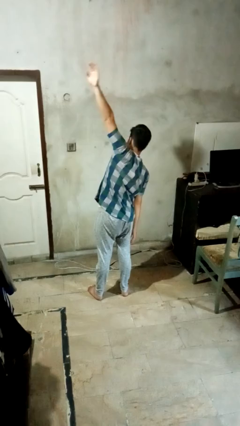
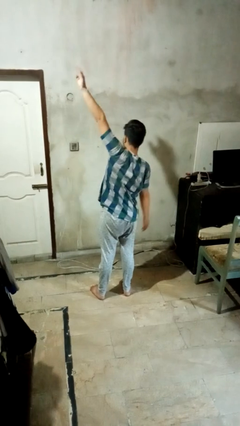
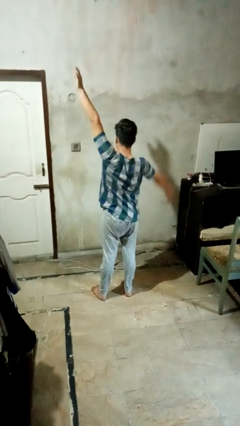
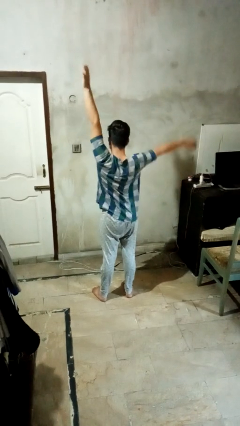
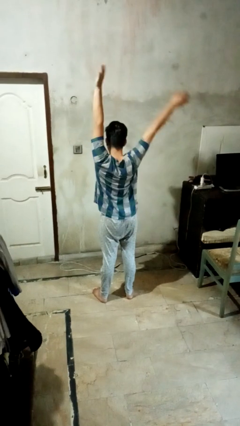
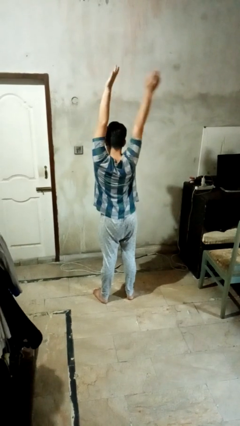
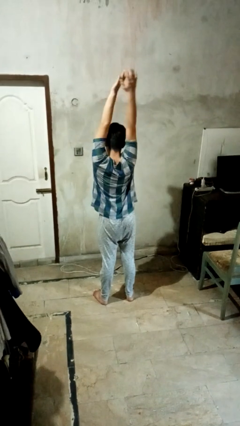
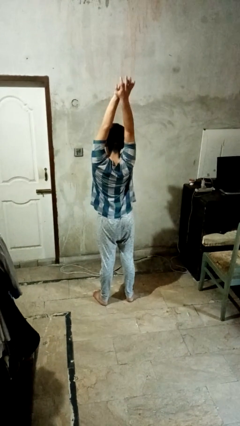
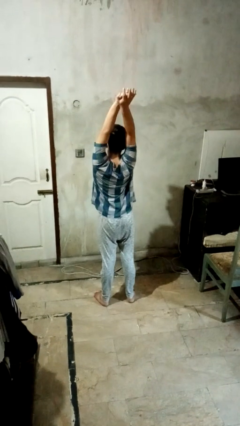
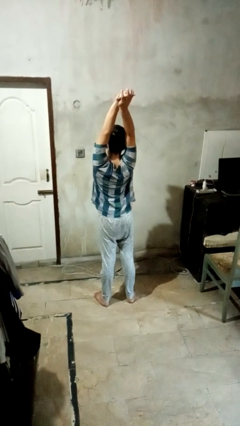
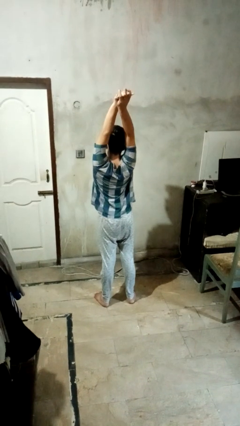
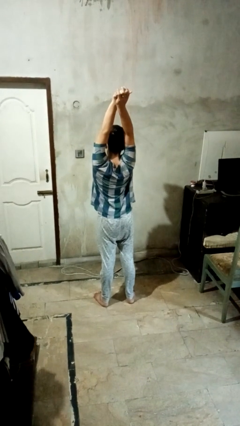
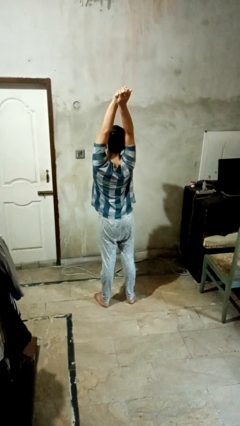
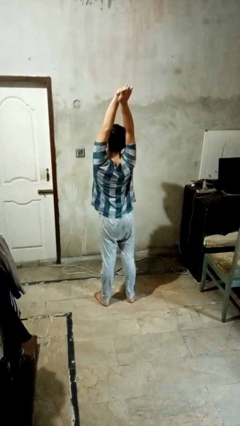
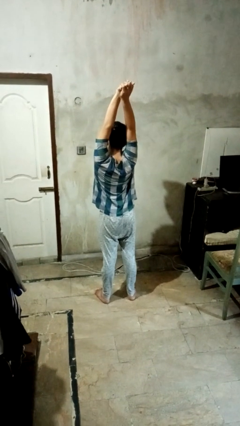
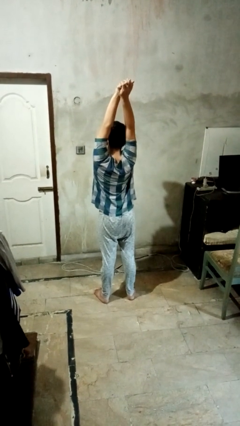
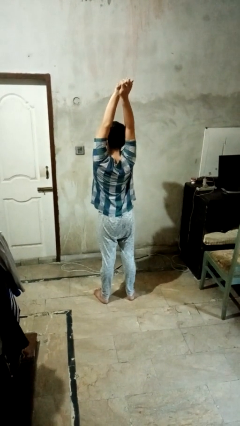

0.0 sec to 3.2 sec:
person stretches arms over head

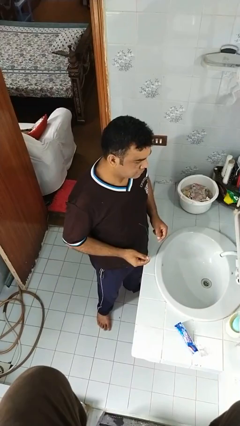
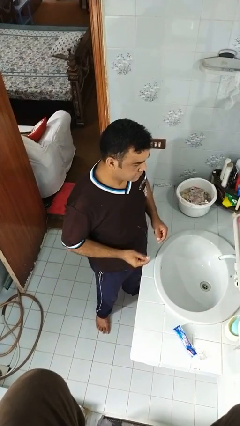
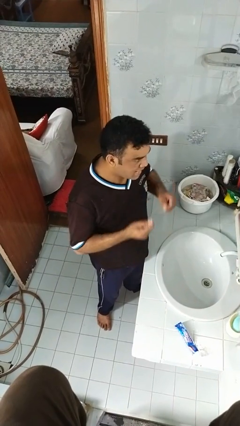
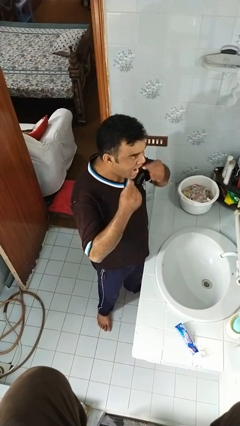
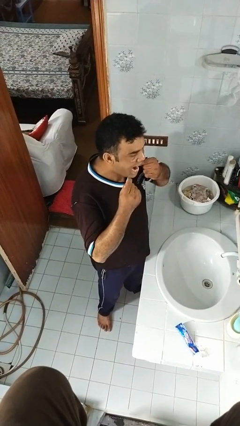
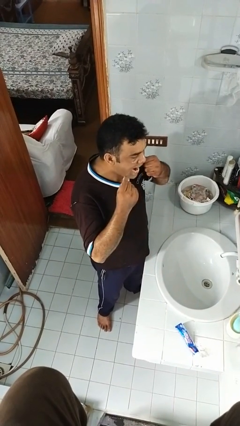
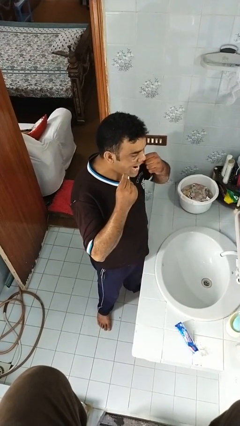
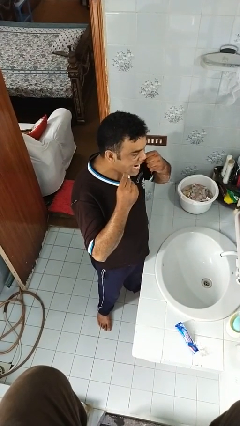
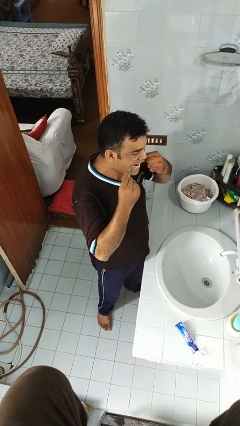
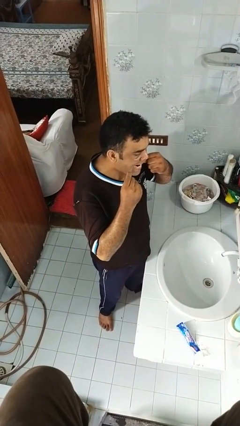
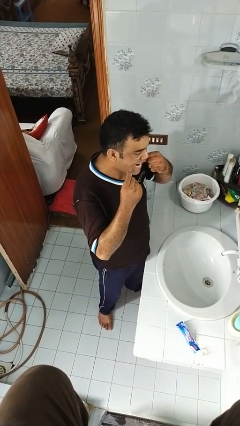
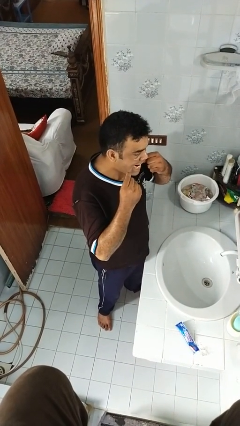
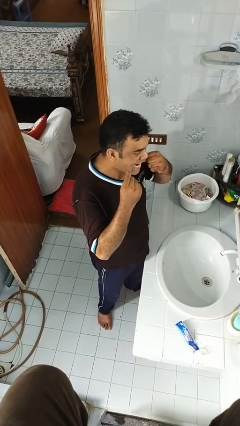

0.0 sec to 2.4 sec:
person flosses

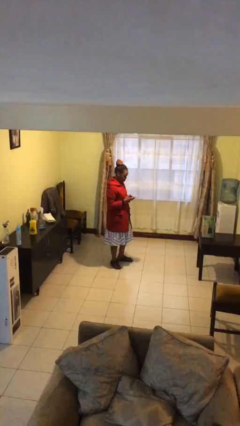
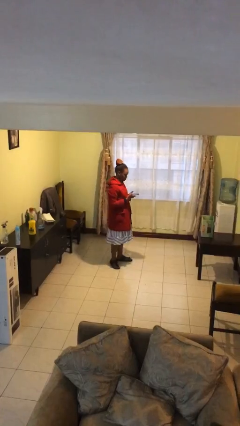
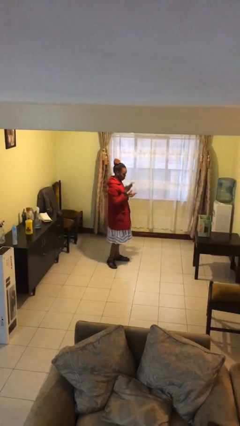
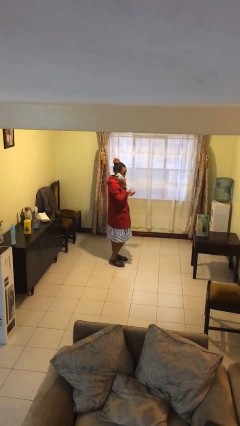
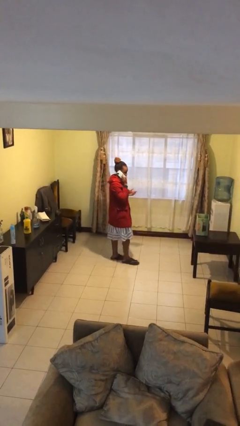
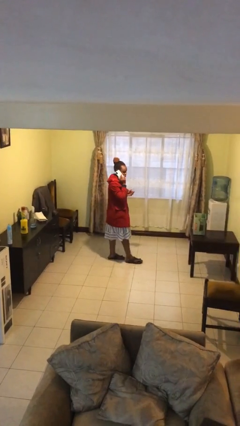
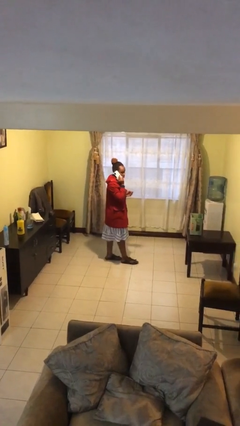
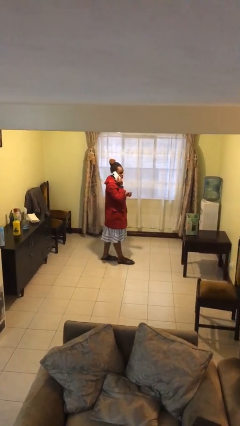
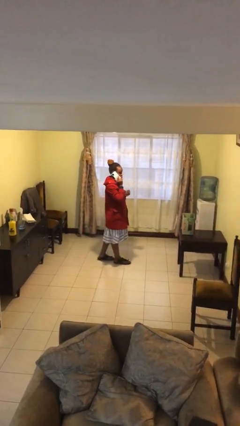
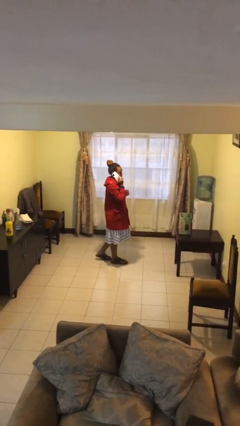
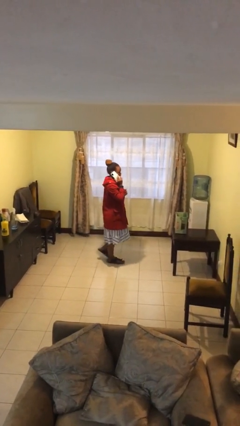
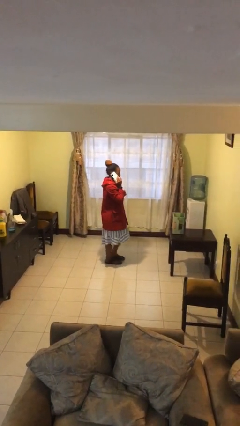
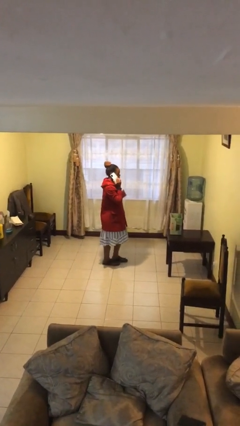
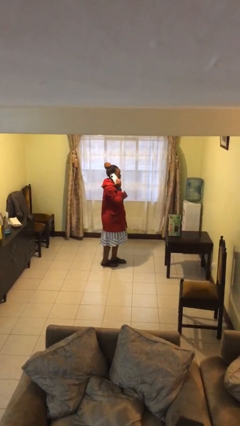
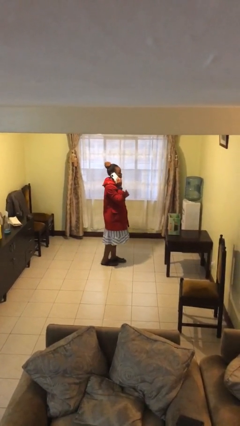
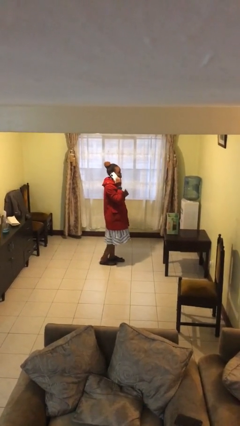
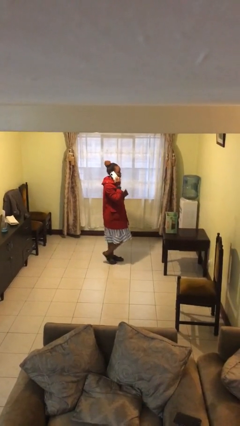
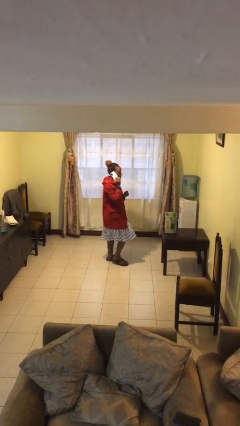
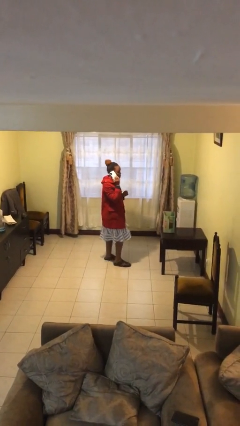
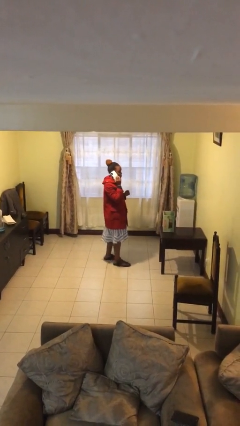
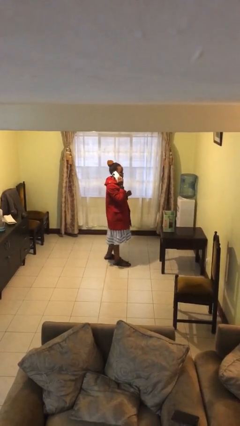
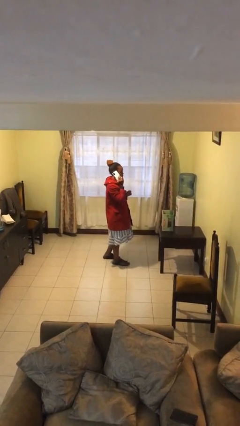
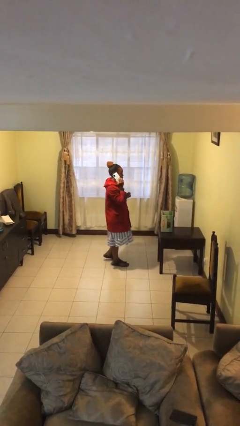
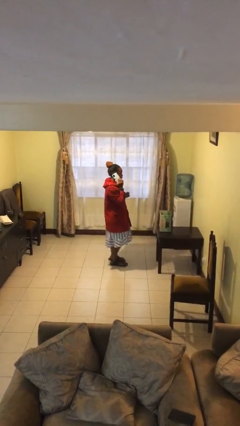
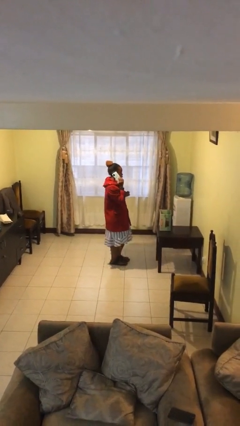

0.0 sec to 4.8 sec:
person talks on phone

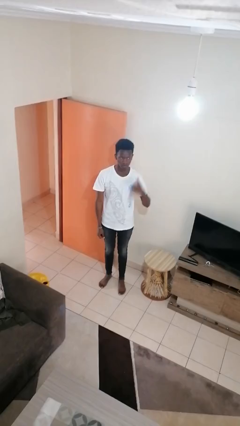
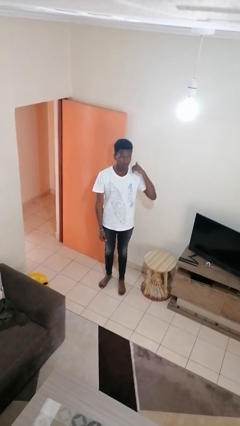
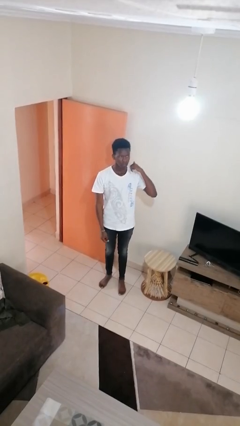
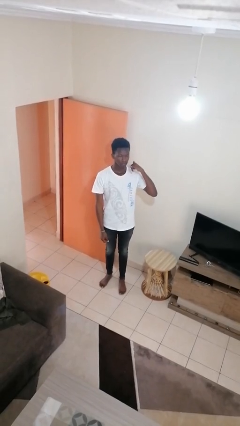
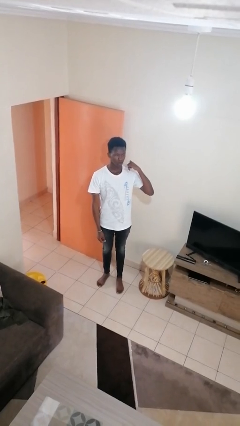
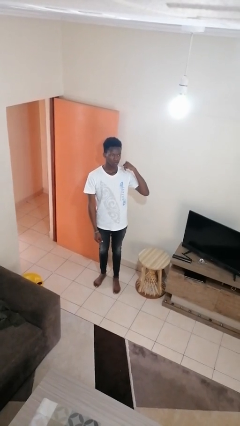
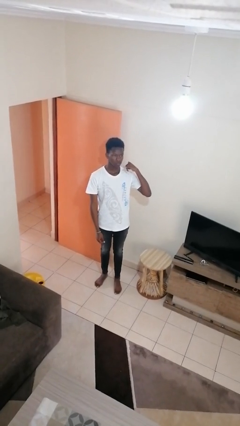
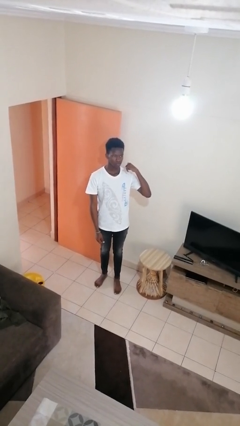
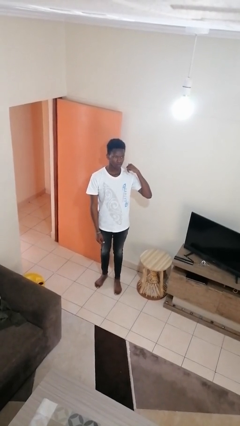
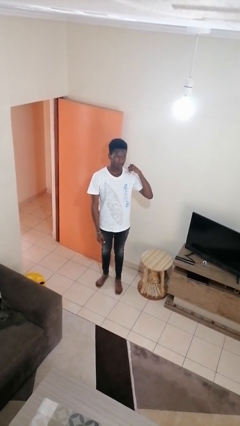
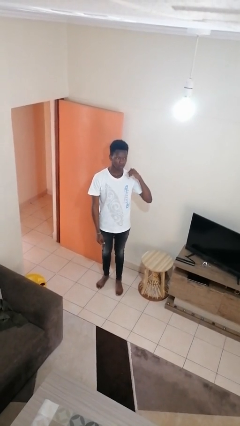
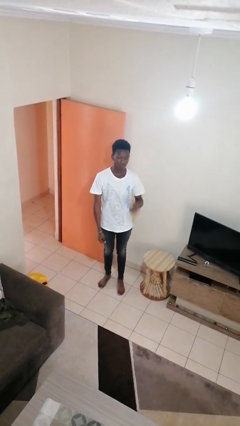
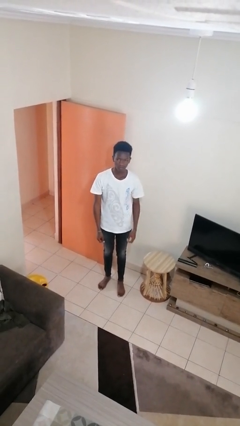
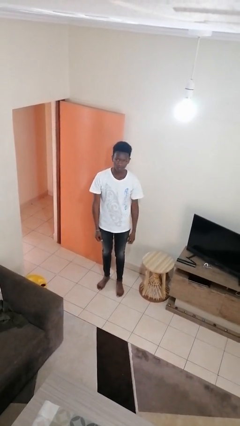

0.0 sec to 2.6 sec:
person gestures call me

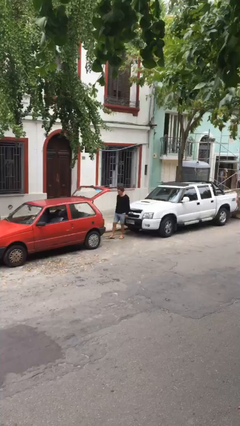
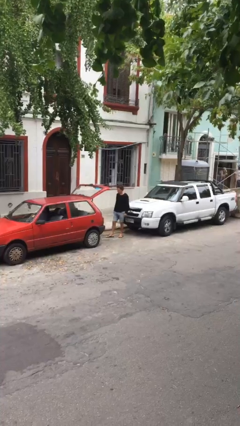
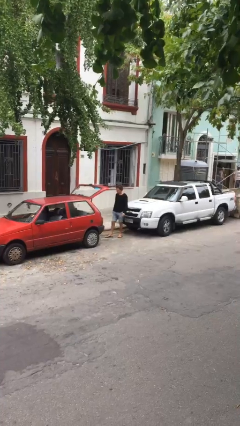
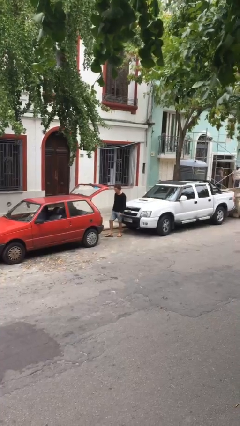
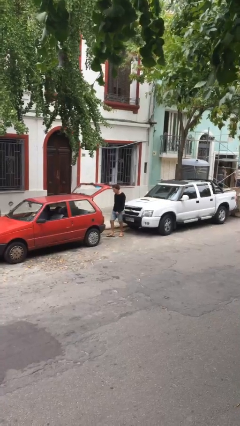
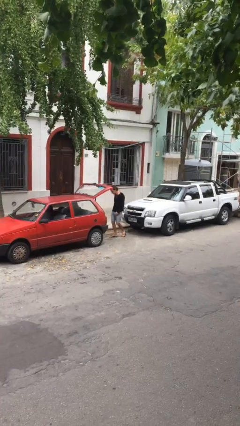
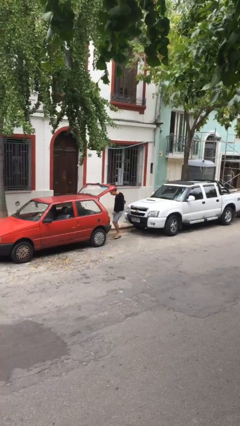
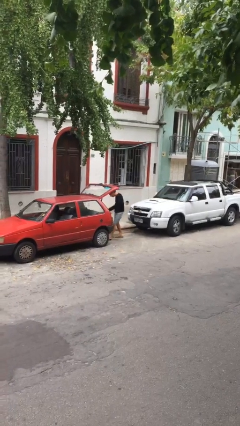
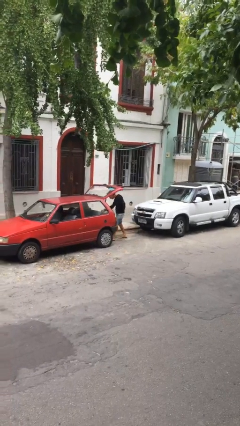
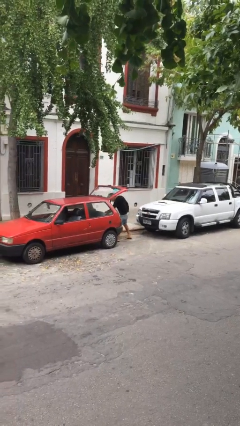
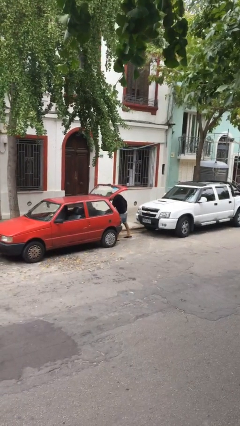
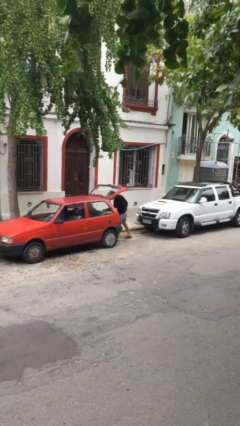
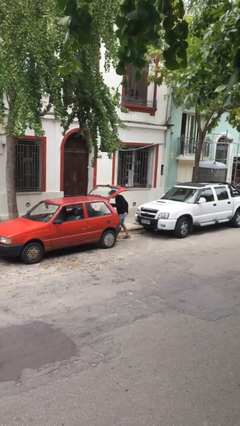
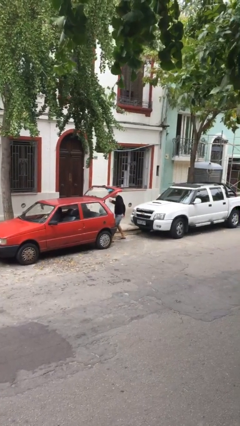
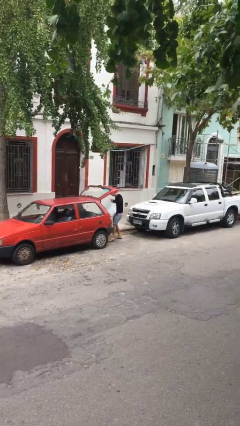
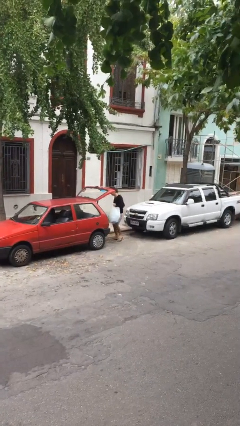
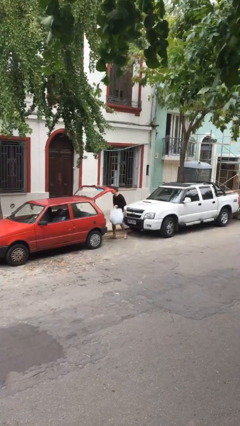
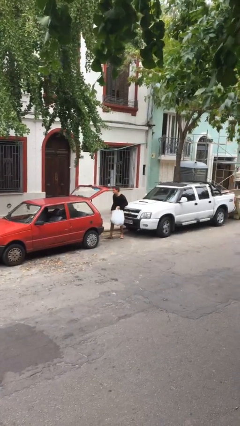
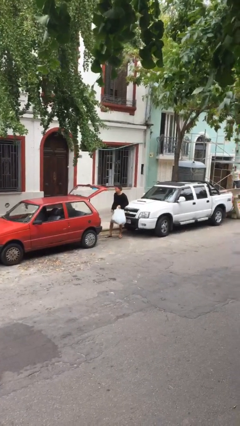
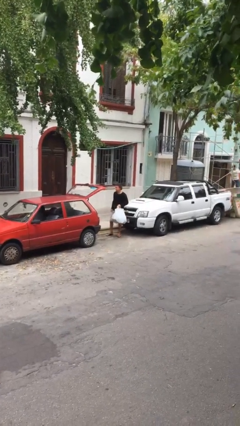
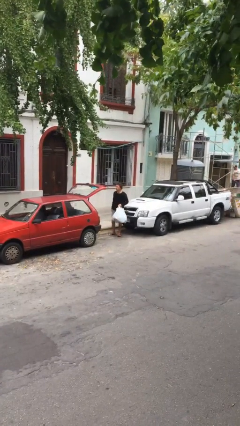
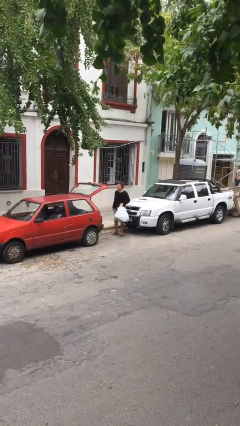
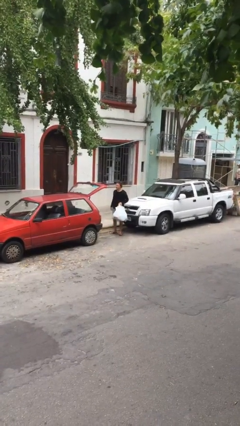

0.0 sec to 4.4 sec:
person unloads car

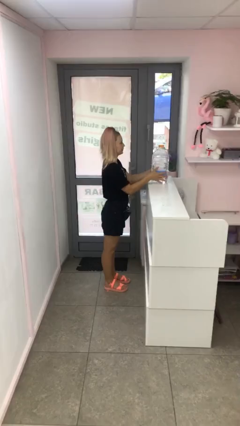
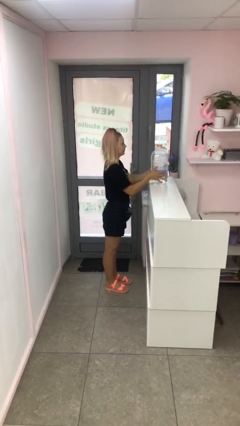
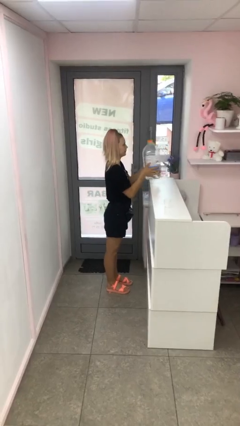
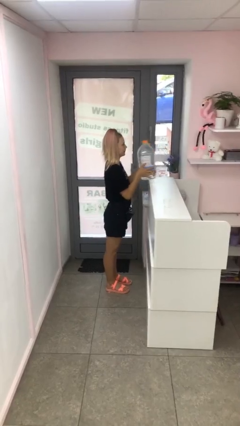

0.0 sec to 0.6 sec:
person picks up object from countertop
